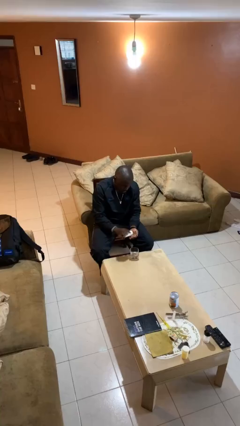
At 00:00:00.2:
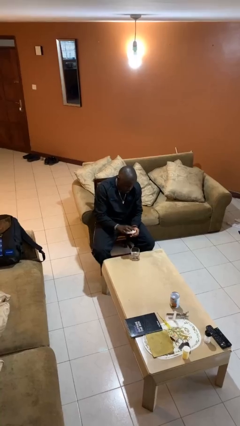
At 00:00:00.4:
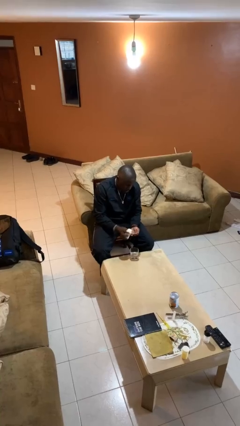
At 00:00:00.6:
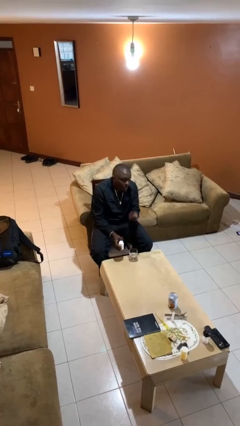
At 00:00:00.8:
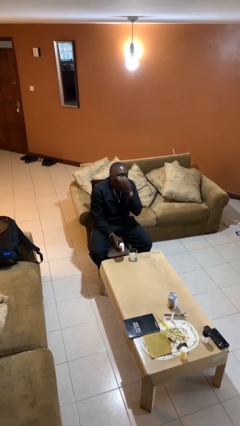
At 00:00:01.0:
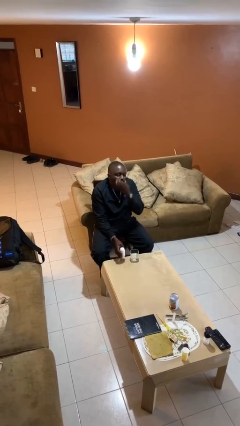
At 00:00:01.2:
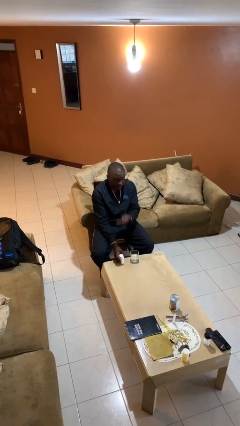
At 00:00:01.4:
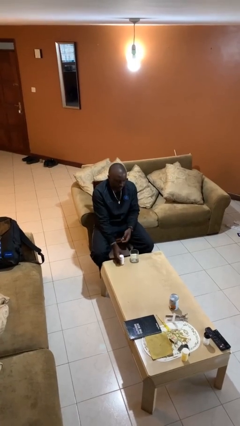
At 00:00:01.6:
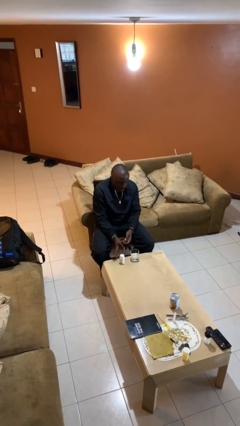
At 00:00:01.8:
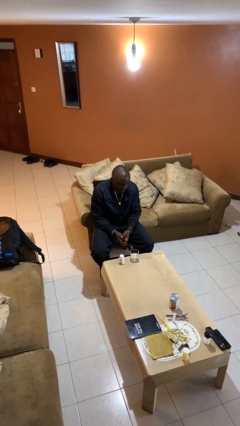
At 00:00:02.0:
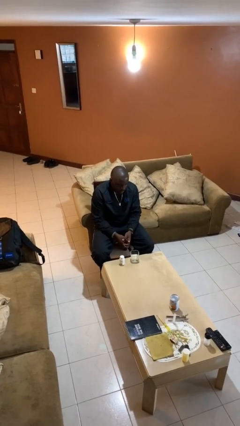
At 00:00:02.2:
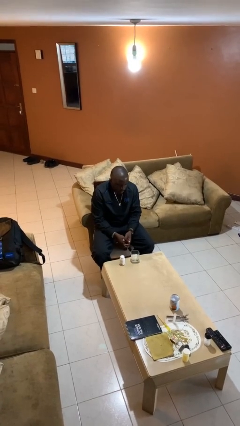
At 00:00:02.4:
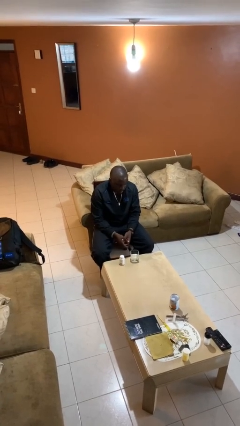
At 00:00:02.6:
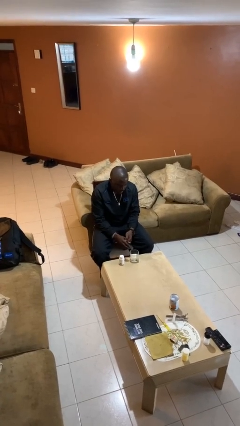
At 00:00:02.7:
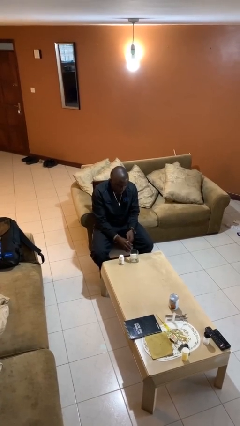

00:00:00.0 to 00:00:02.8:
person takes medicine pills

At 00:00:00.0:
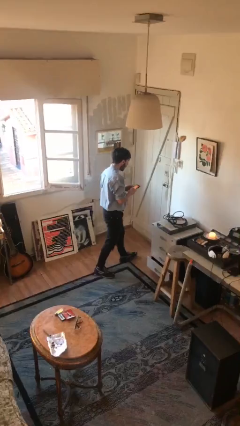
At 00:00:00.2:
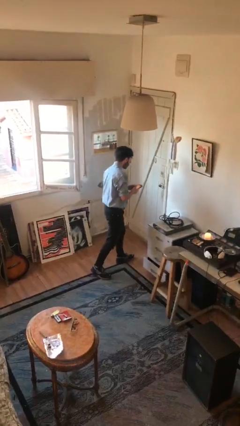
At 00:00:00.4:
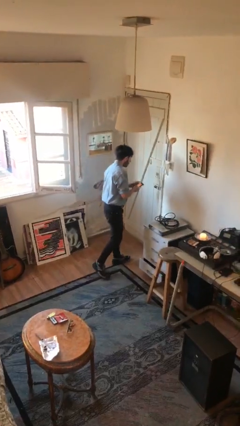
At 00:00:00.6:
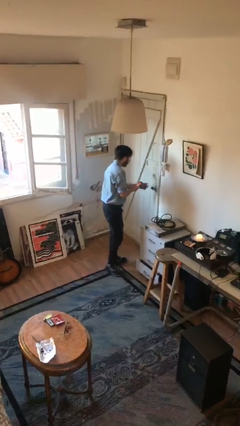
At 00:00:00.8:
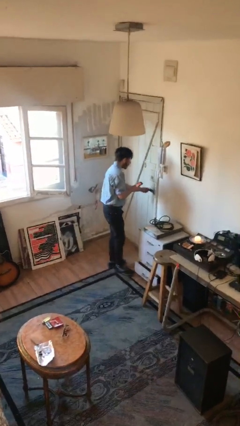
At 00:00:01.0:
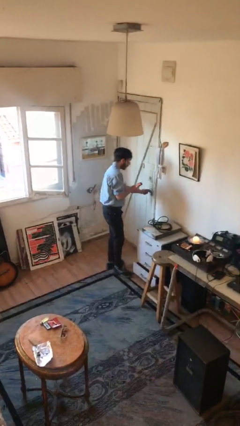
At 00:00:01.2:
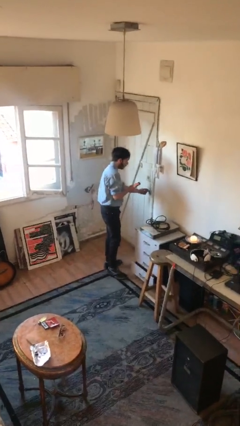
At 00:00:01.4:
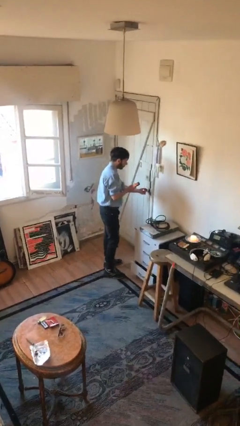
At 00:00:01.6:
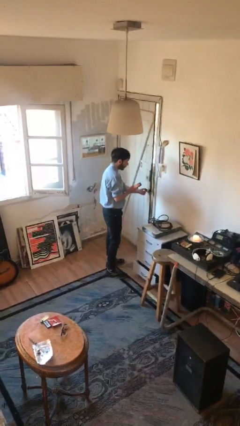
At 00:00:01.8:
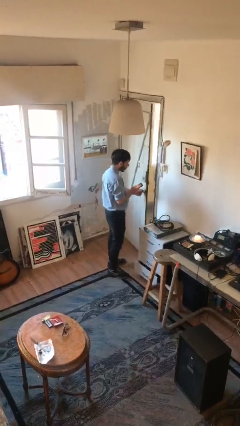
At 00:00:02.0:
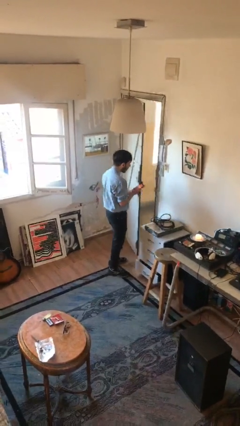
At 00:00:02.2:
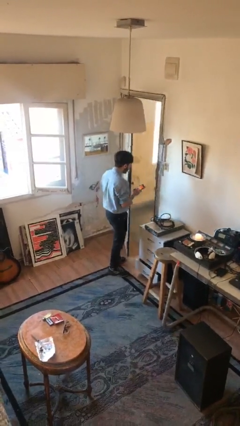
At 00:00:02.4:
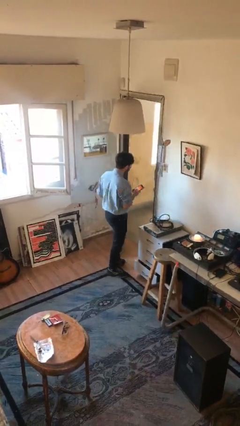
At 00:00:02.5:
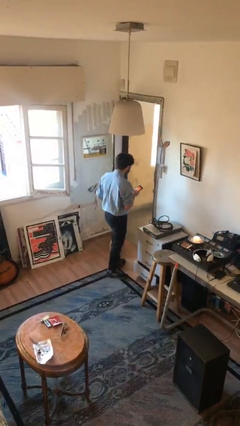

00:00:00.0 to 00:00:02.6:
person opens facility door

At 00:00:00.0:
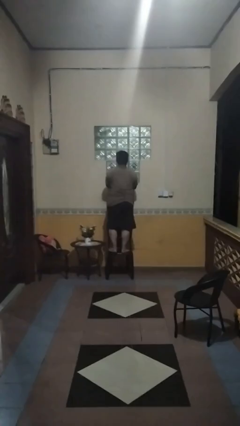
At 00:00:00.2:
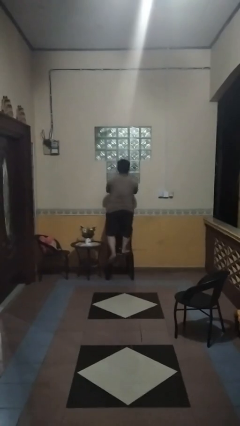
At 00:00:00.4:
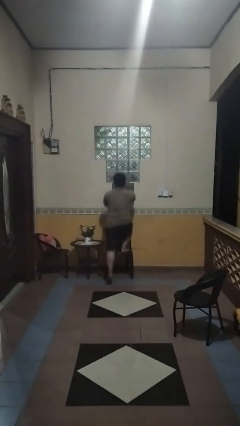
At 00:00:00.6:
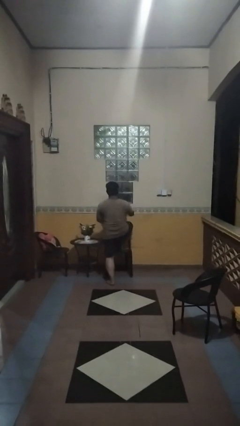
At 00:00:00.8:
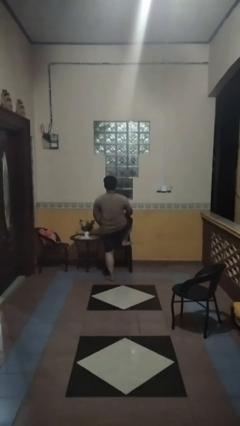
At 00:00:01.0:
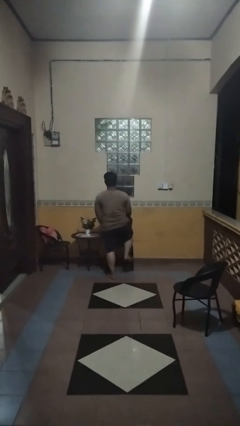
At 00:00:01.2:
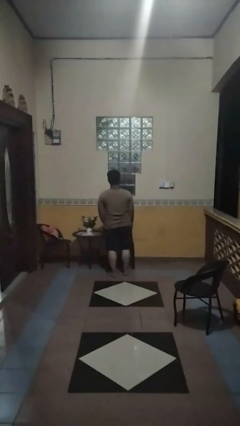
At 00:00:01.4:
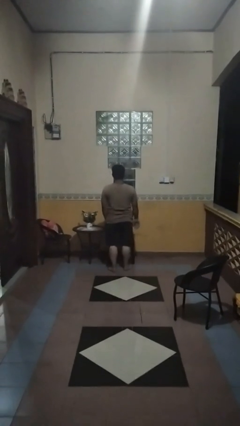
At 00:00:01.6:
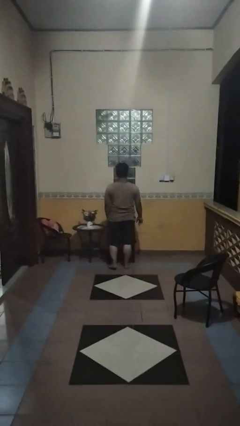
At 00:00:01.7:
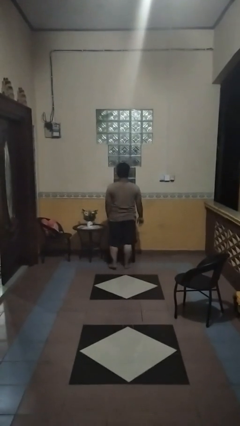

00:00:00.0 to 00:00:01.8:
person climbs off chair

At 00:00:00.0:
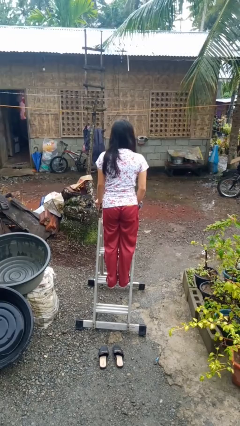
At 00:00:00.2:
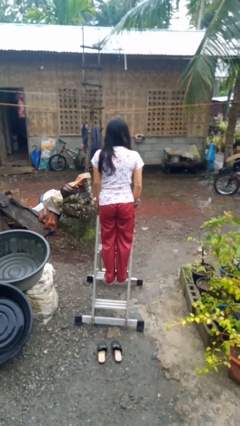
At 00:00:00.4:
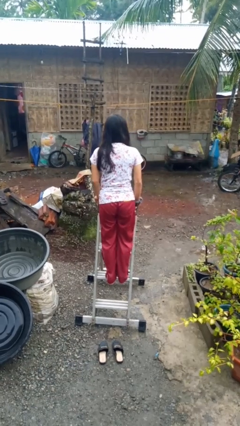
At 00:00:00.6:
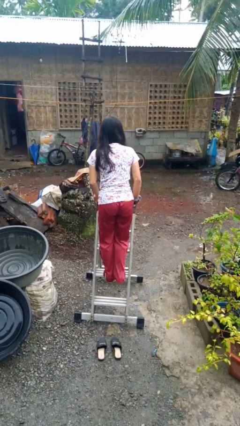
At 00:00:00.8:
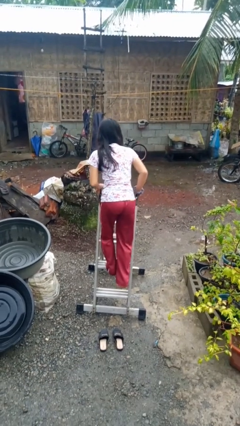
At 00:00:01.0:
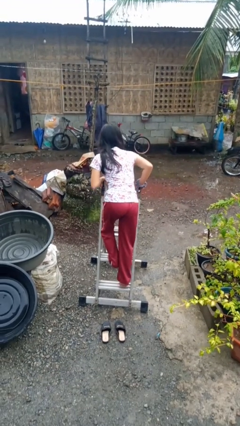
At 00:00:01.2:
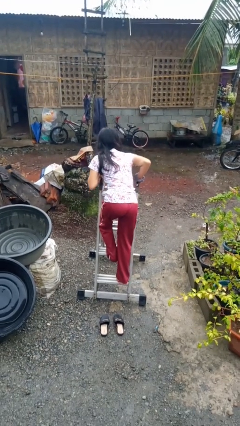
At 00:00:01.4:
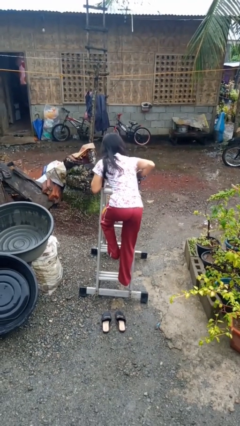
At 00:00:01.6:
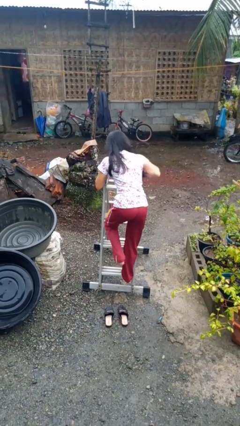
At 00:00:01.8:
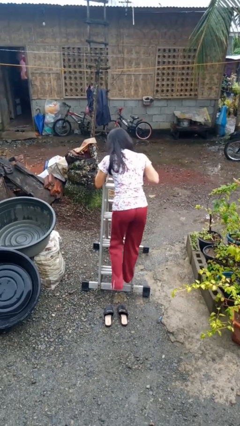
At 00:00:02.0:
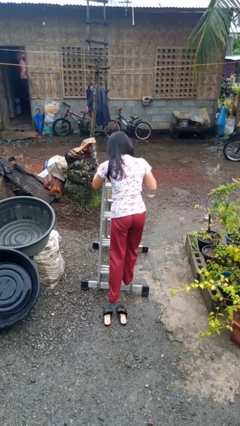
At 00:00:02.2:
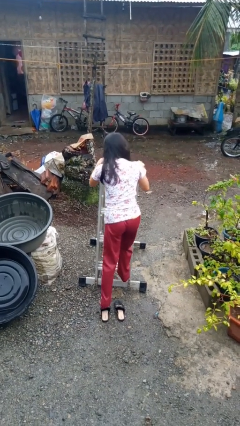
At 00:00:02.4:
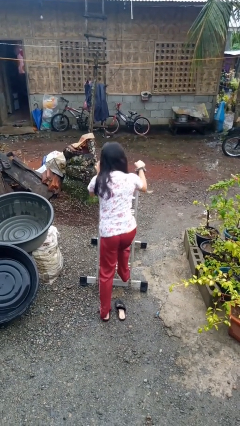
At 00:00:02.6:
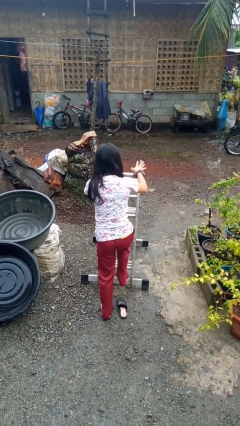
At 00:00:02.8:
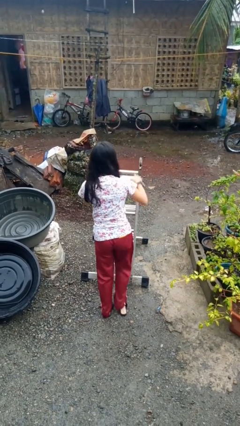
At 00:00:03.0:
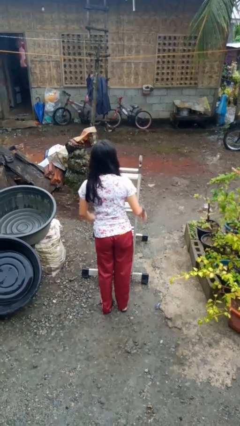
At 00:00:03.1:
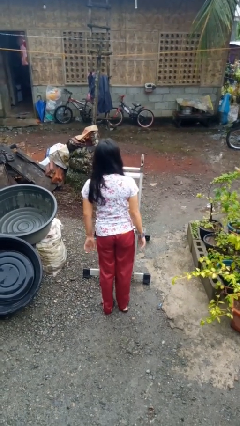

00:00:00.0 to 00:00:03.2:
person climbs down ladder

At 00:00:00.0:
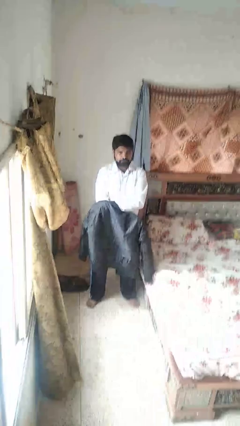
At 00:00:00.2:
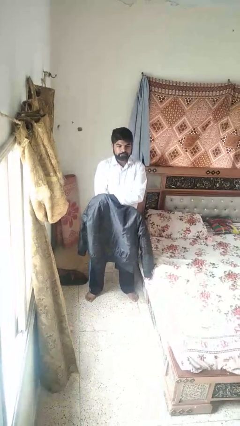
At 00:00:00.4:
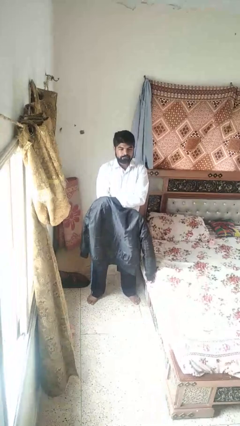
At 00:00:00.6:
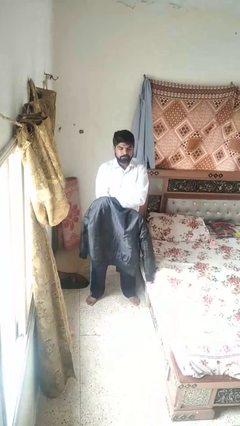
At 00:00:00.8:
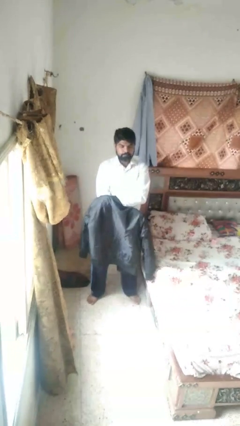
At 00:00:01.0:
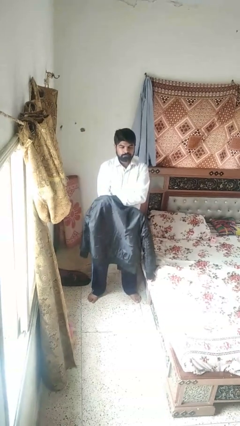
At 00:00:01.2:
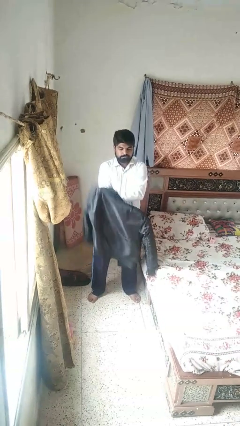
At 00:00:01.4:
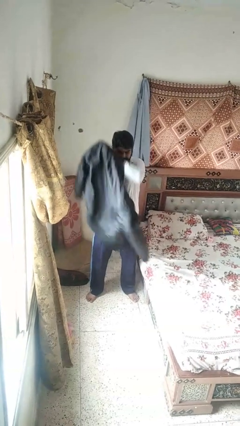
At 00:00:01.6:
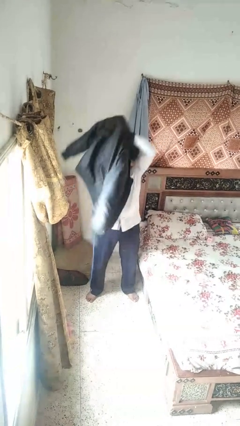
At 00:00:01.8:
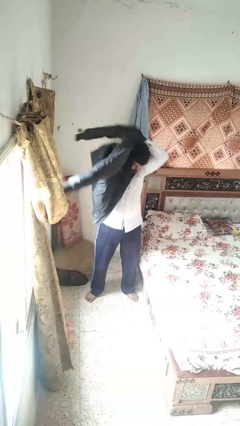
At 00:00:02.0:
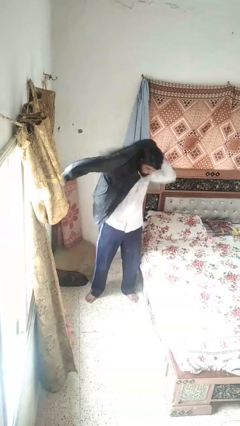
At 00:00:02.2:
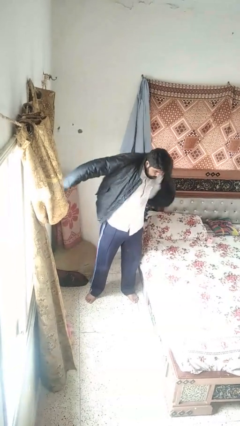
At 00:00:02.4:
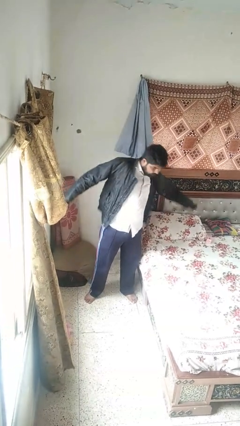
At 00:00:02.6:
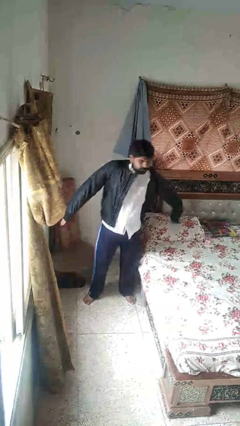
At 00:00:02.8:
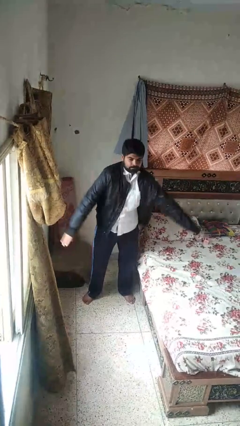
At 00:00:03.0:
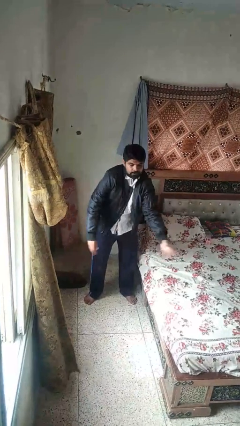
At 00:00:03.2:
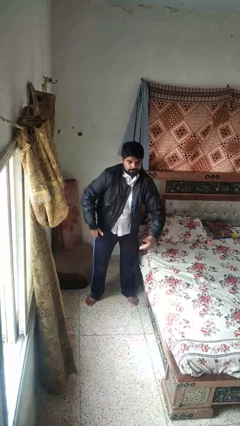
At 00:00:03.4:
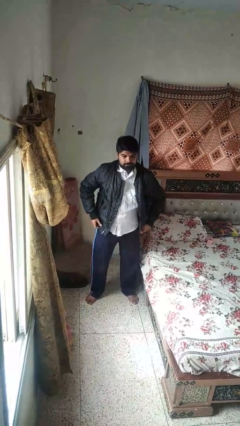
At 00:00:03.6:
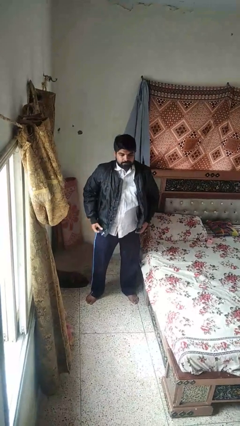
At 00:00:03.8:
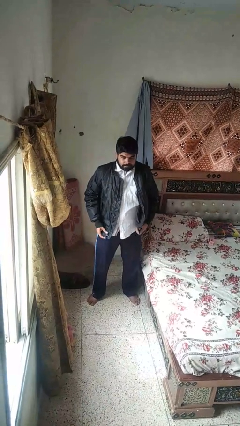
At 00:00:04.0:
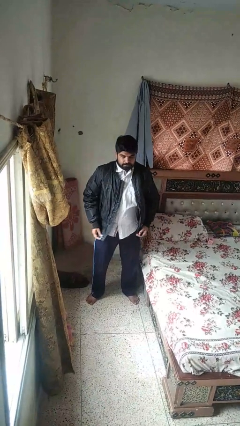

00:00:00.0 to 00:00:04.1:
person puts on jacket

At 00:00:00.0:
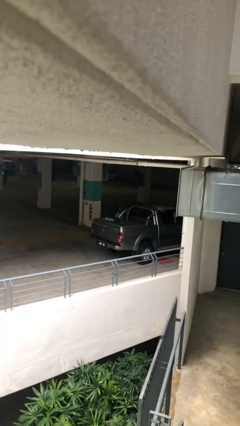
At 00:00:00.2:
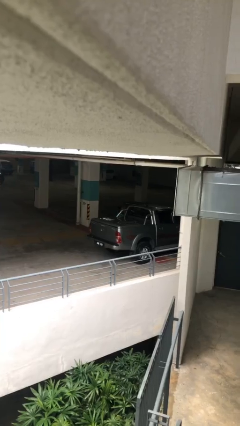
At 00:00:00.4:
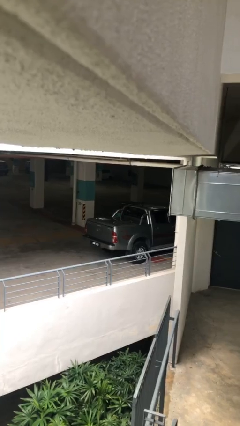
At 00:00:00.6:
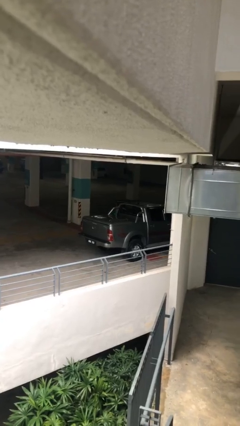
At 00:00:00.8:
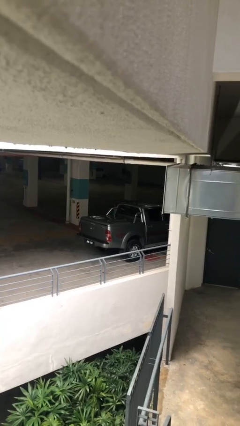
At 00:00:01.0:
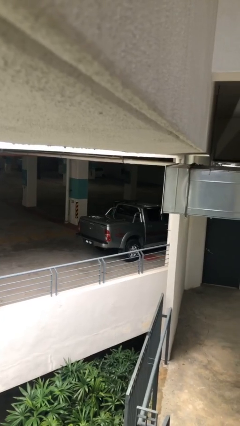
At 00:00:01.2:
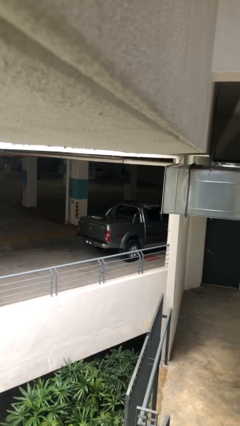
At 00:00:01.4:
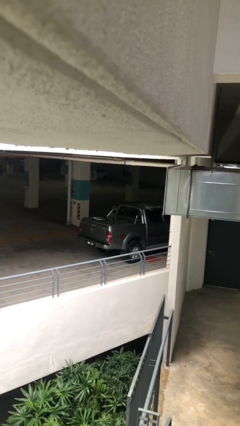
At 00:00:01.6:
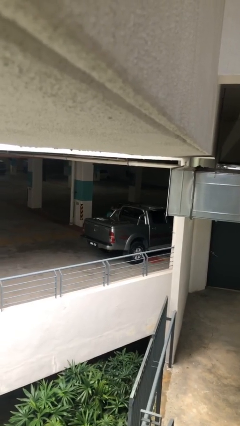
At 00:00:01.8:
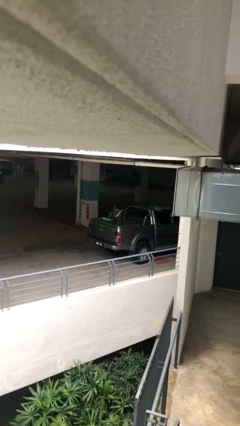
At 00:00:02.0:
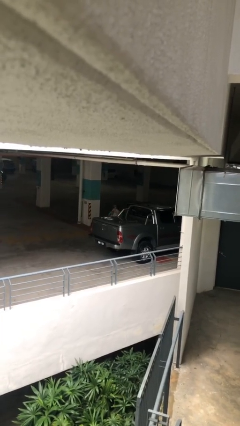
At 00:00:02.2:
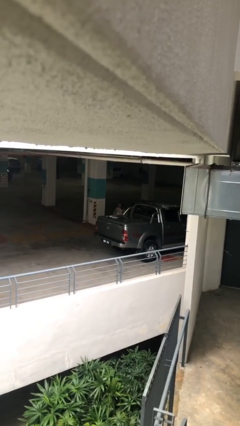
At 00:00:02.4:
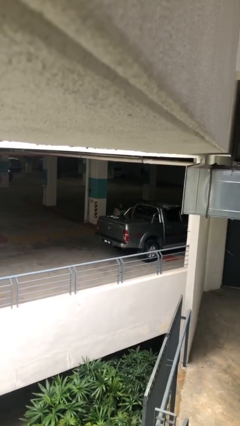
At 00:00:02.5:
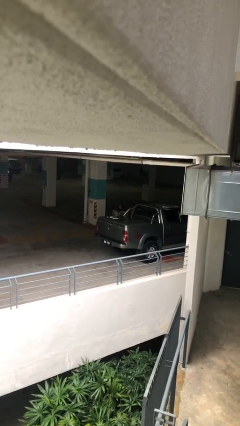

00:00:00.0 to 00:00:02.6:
person unloads car

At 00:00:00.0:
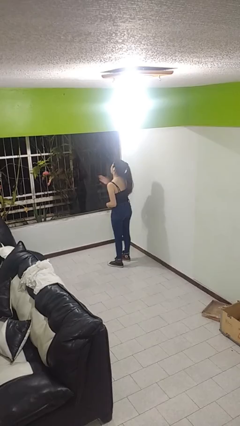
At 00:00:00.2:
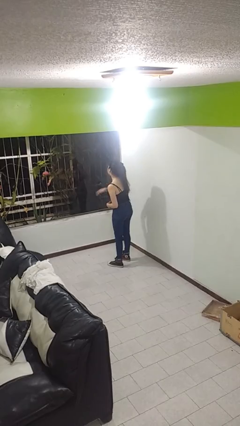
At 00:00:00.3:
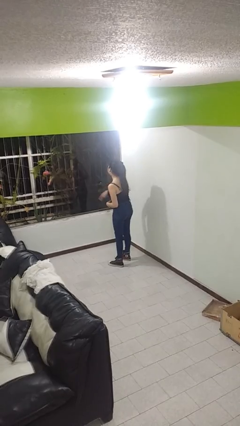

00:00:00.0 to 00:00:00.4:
person swats bug
